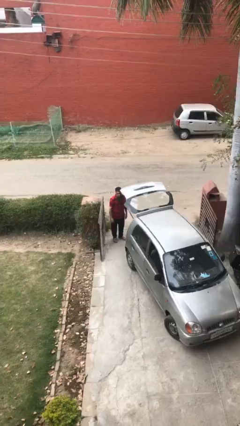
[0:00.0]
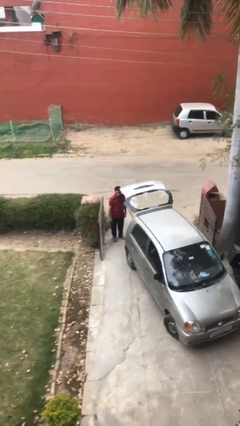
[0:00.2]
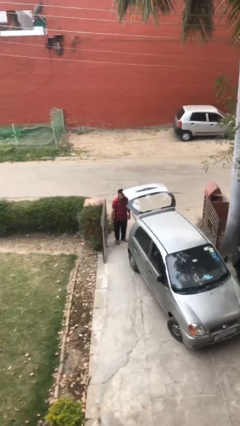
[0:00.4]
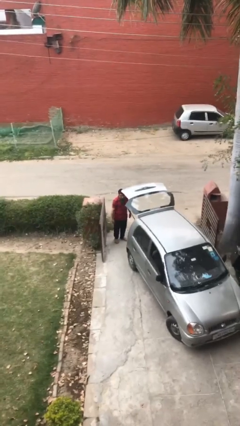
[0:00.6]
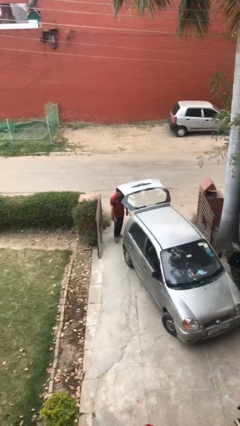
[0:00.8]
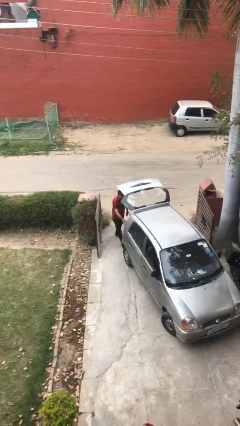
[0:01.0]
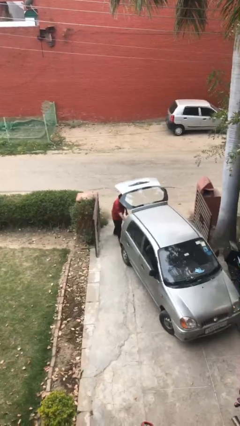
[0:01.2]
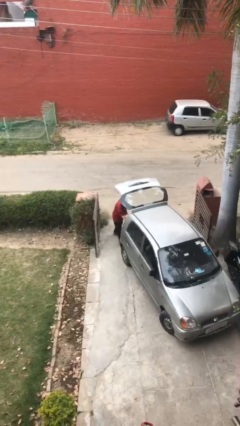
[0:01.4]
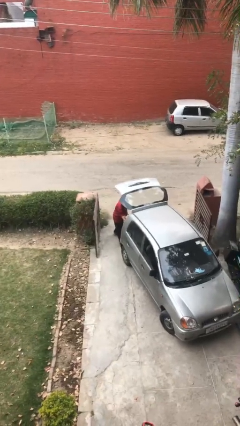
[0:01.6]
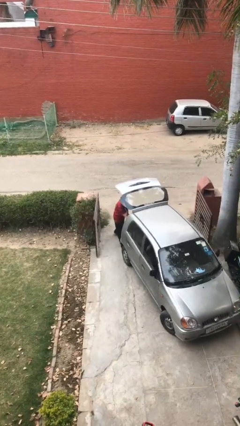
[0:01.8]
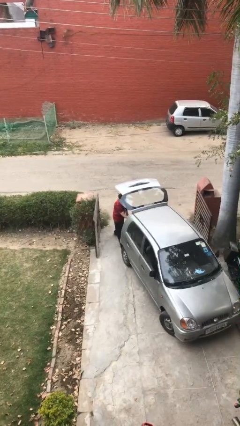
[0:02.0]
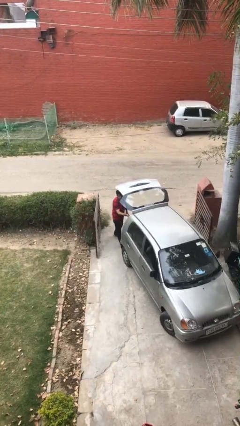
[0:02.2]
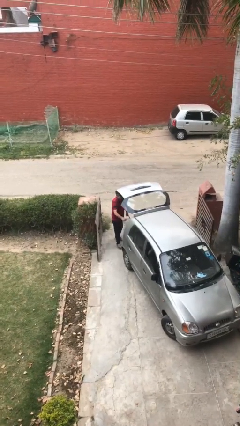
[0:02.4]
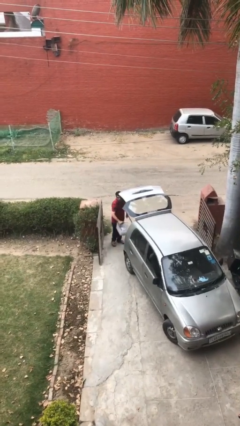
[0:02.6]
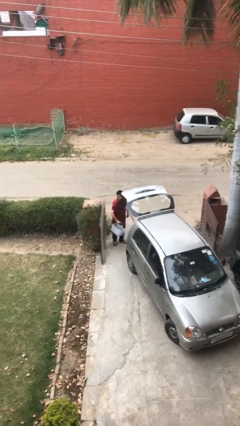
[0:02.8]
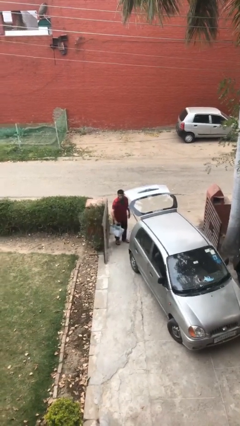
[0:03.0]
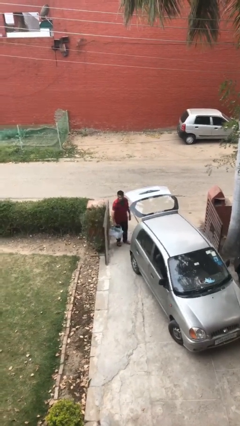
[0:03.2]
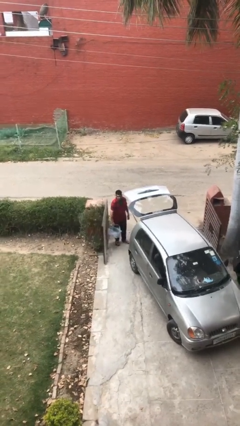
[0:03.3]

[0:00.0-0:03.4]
person unloads car

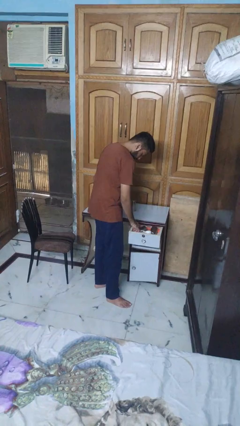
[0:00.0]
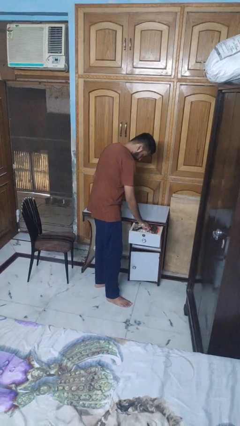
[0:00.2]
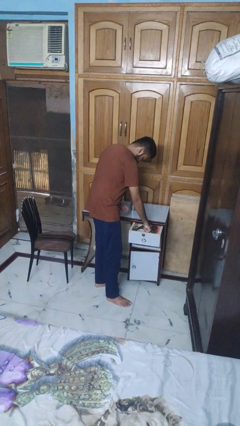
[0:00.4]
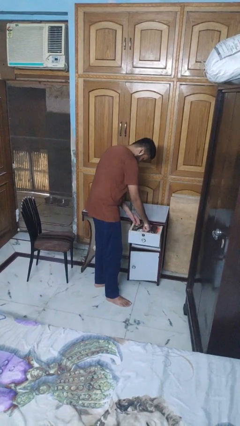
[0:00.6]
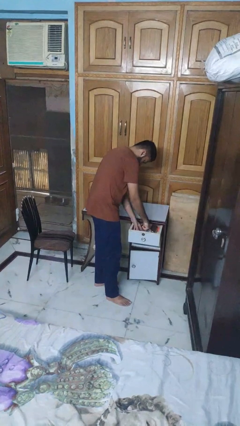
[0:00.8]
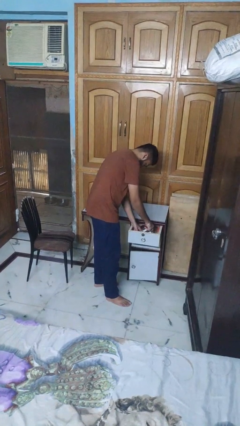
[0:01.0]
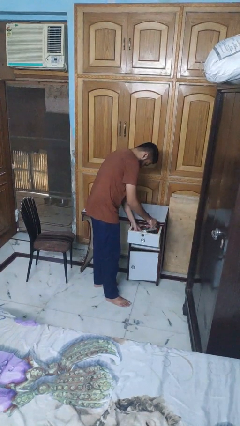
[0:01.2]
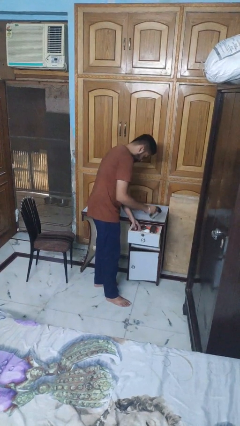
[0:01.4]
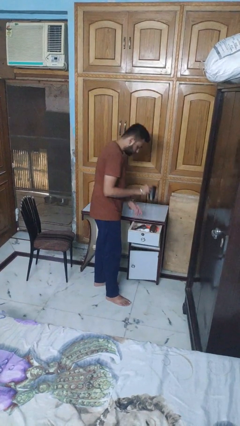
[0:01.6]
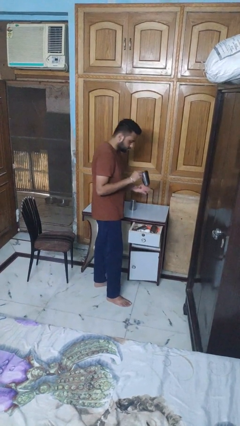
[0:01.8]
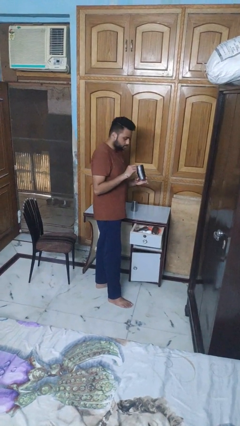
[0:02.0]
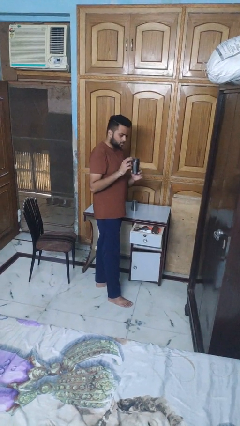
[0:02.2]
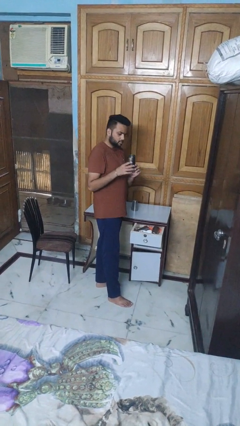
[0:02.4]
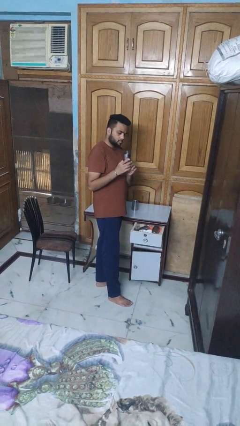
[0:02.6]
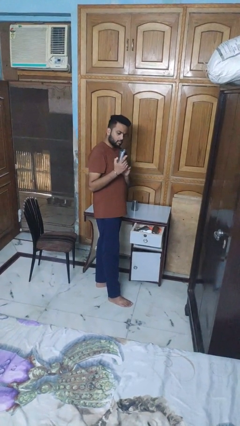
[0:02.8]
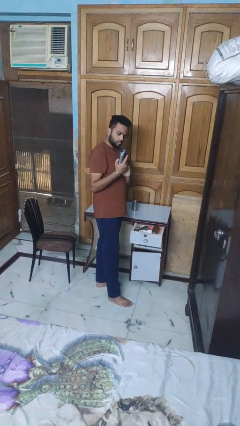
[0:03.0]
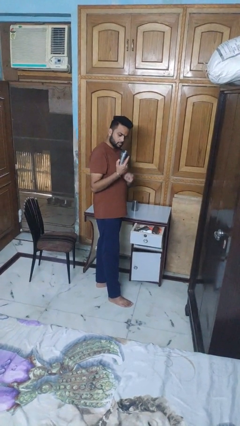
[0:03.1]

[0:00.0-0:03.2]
person takes object from kitchen drawer

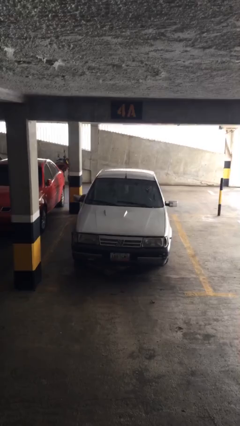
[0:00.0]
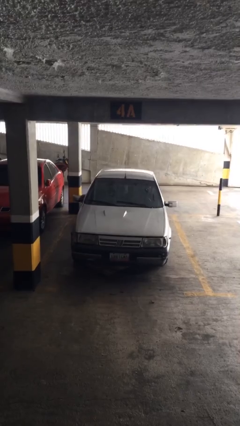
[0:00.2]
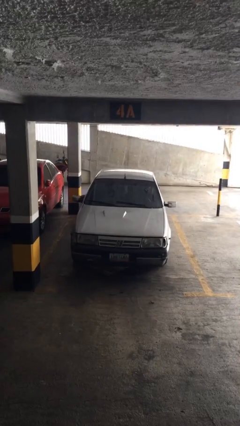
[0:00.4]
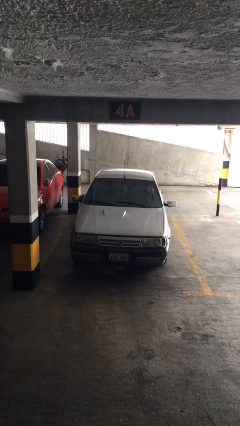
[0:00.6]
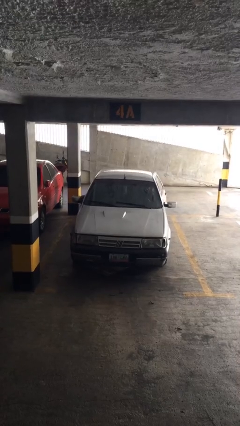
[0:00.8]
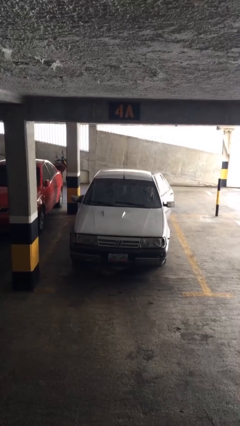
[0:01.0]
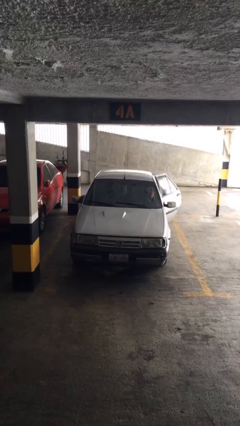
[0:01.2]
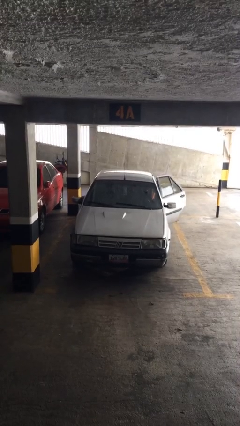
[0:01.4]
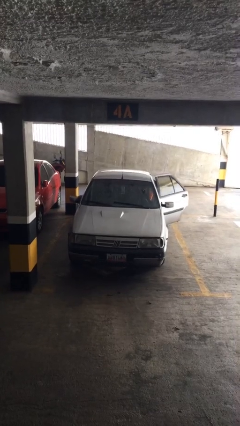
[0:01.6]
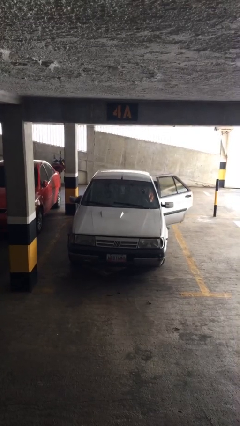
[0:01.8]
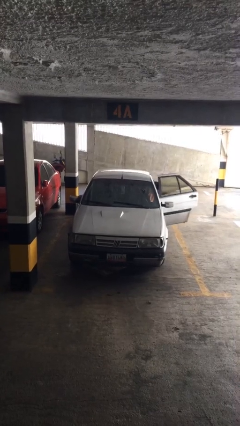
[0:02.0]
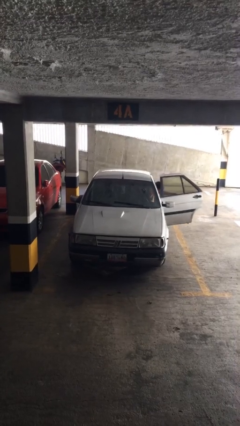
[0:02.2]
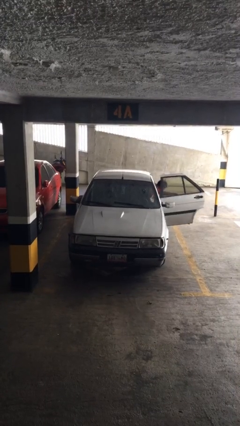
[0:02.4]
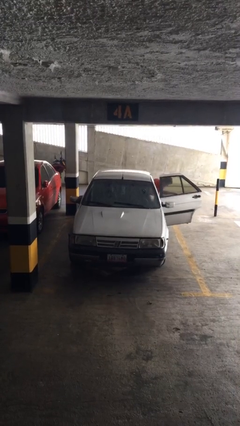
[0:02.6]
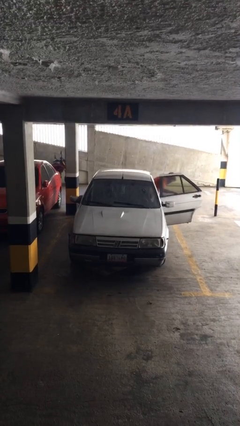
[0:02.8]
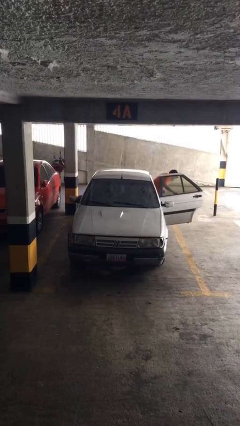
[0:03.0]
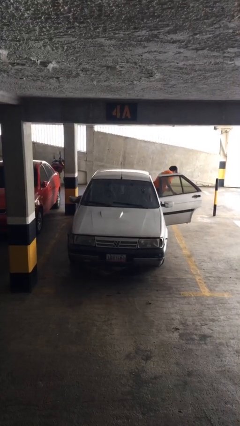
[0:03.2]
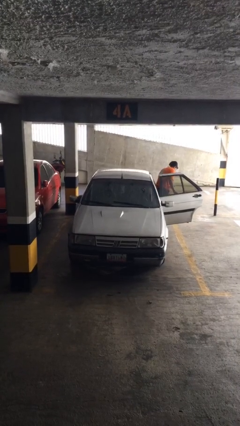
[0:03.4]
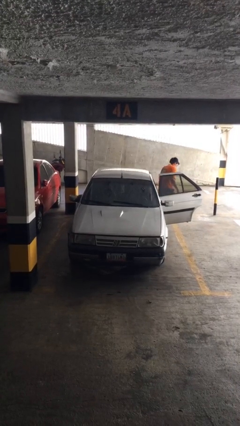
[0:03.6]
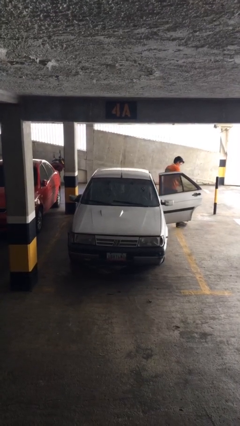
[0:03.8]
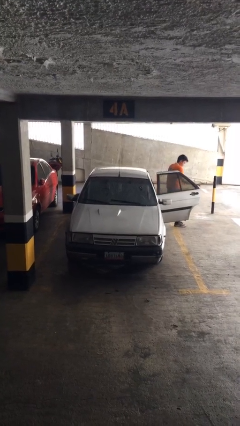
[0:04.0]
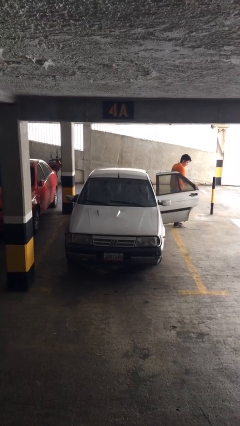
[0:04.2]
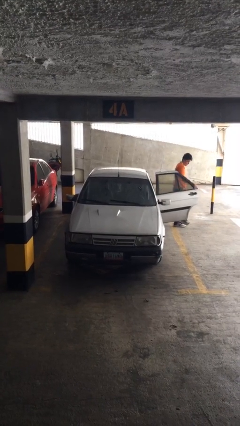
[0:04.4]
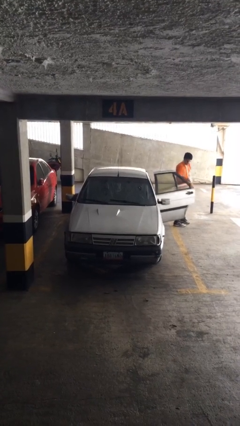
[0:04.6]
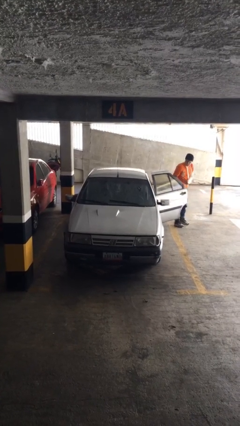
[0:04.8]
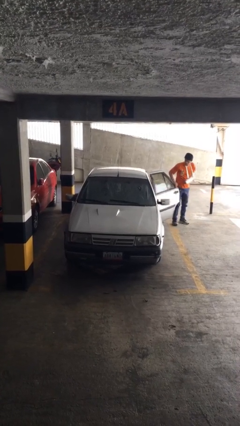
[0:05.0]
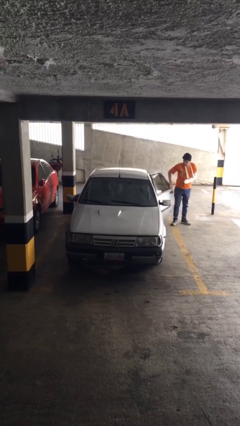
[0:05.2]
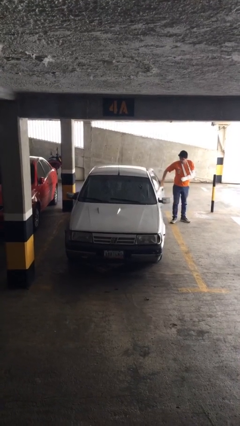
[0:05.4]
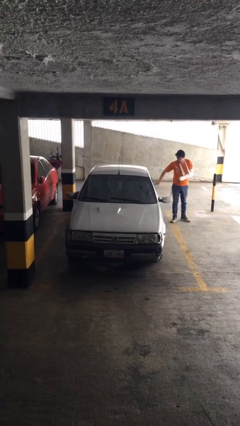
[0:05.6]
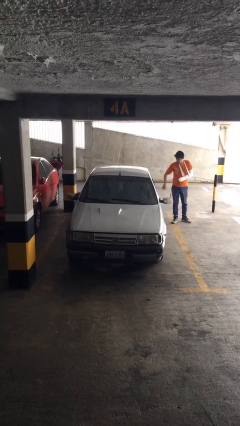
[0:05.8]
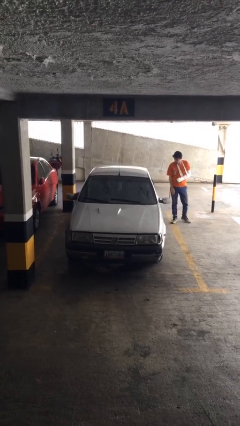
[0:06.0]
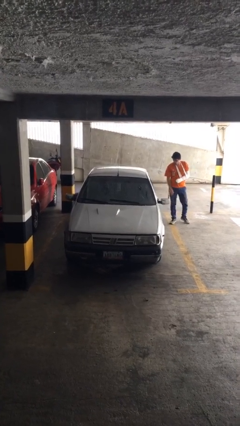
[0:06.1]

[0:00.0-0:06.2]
car drops off person

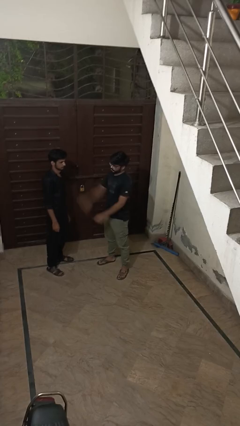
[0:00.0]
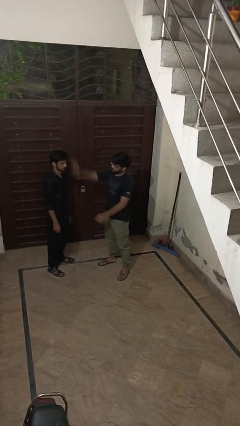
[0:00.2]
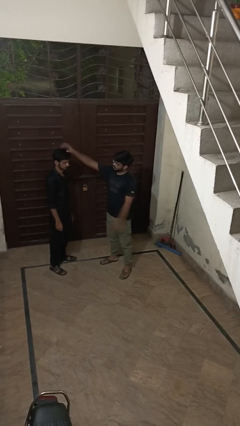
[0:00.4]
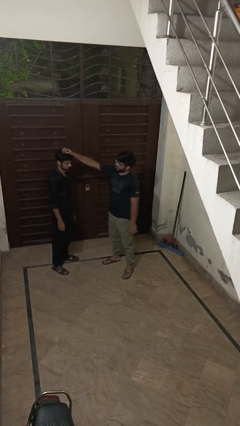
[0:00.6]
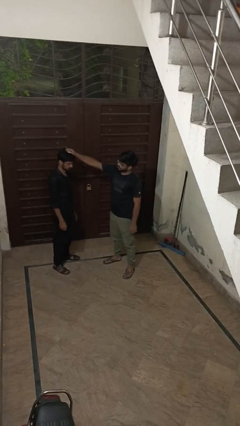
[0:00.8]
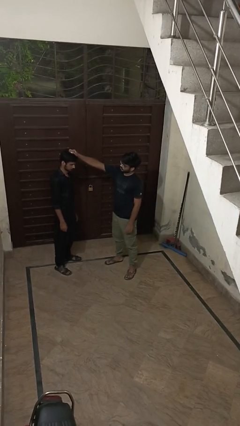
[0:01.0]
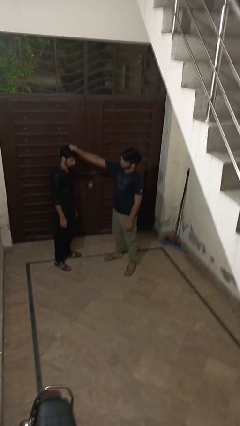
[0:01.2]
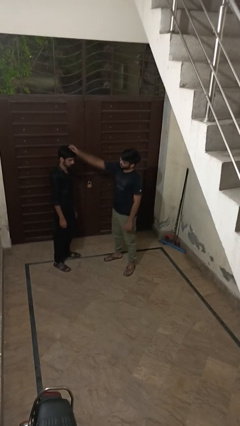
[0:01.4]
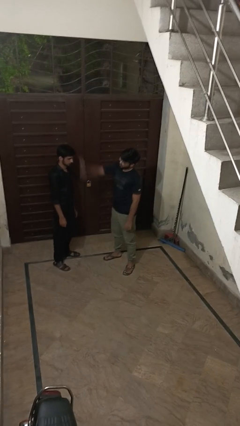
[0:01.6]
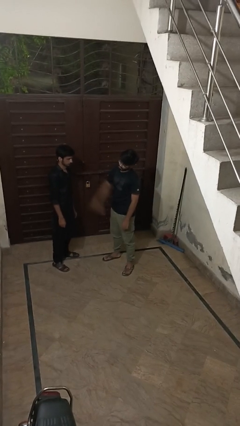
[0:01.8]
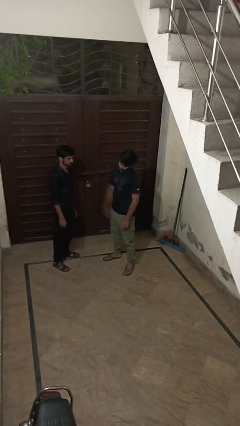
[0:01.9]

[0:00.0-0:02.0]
person grabs person by hair

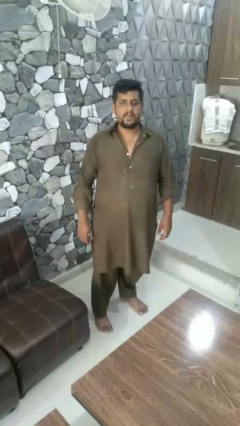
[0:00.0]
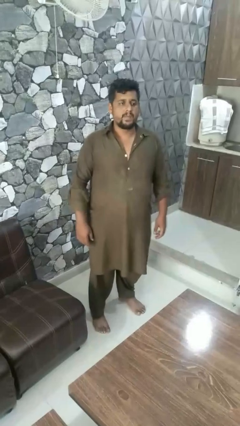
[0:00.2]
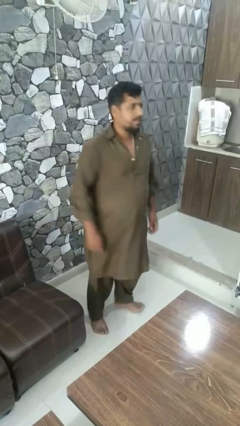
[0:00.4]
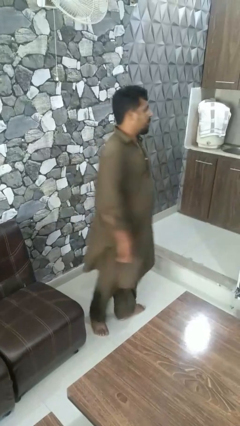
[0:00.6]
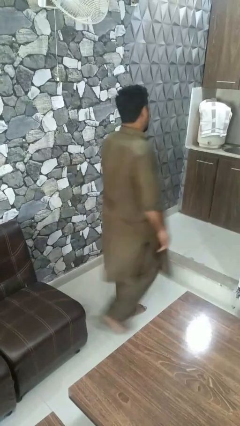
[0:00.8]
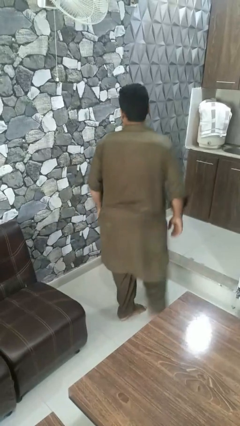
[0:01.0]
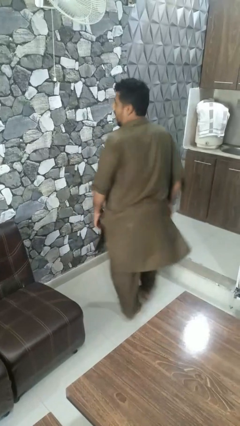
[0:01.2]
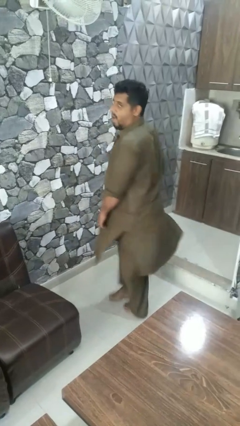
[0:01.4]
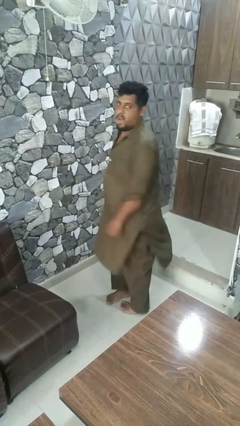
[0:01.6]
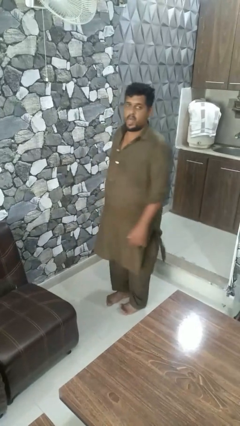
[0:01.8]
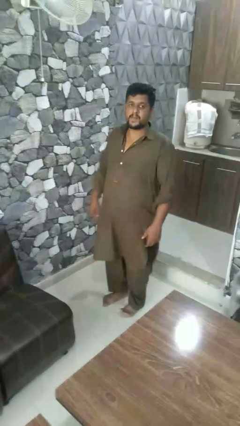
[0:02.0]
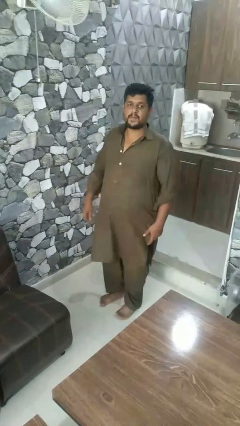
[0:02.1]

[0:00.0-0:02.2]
person twirls

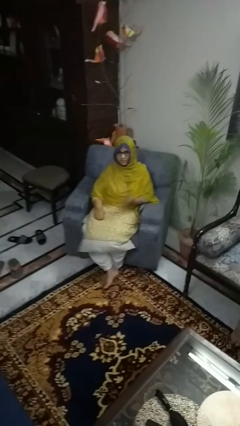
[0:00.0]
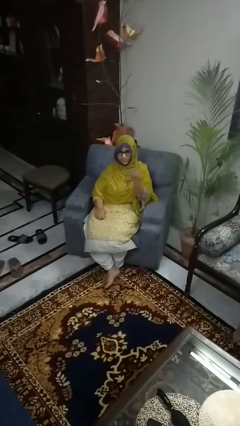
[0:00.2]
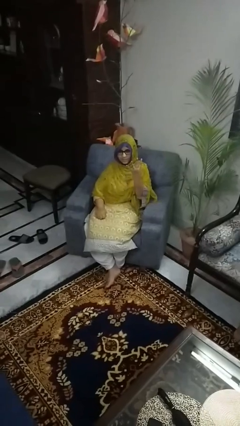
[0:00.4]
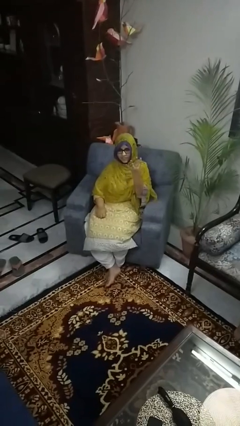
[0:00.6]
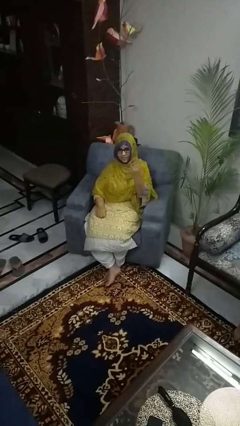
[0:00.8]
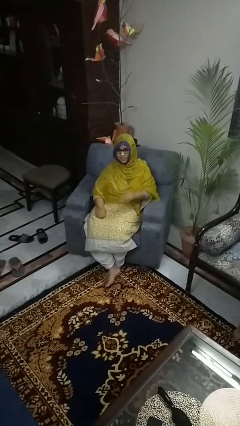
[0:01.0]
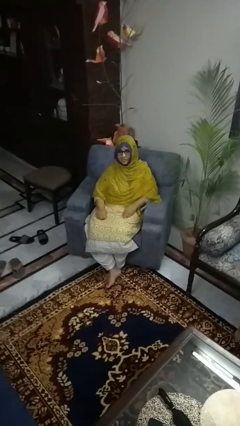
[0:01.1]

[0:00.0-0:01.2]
person gestures number four
